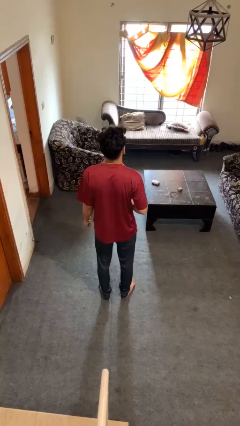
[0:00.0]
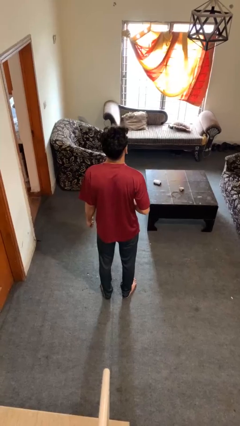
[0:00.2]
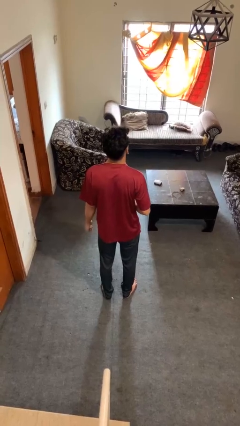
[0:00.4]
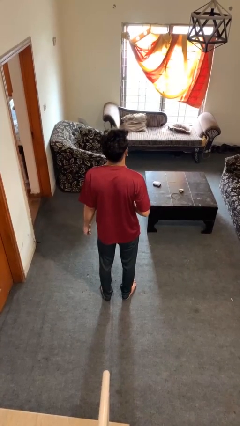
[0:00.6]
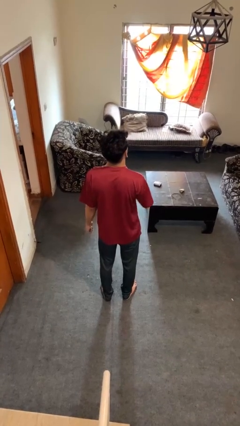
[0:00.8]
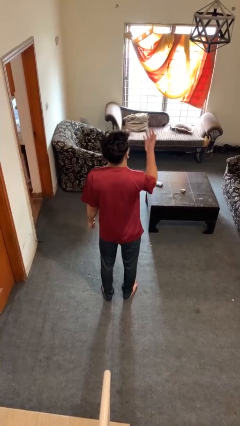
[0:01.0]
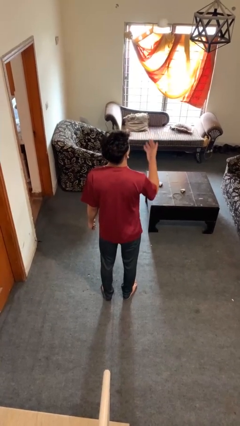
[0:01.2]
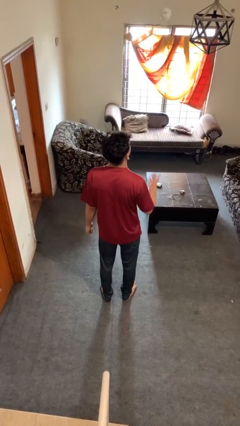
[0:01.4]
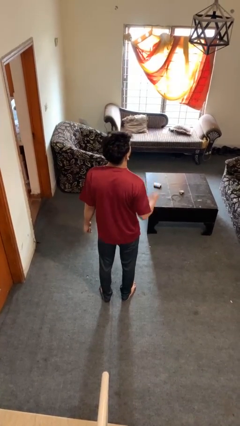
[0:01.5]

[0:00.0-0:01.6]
person drops object

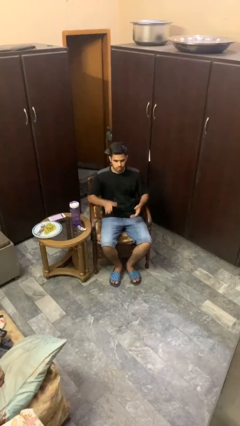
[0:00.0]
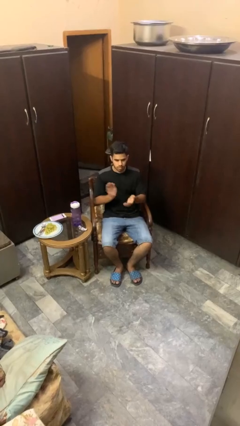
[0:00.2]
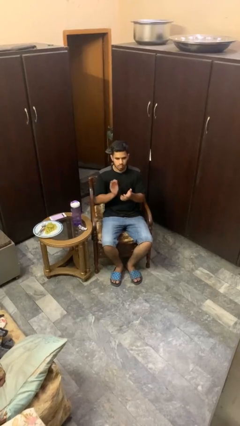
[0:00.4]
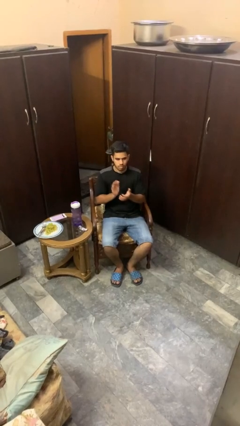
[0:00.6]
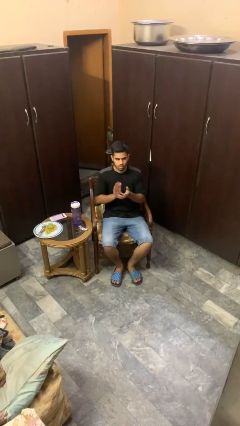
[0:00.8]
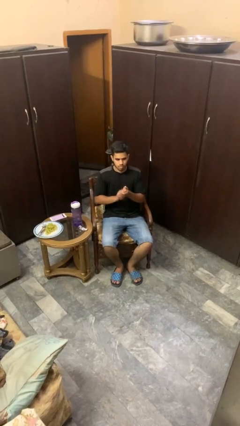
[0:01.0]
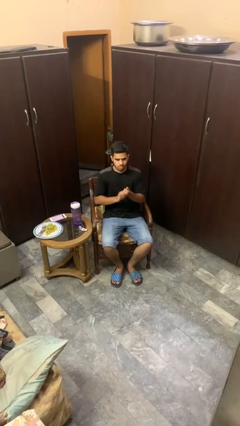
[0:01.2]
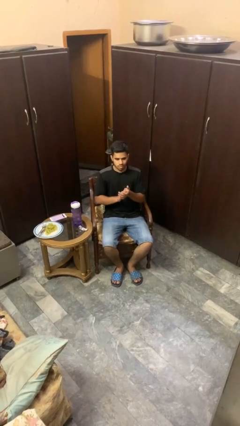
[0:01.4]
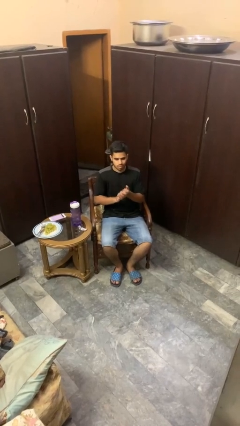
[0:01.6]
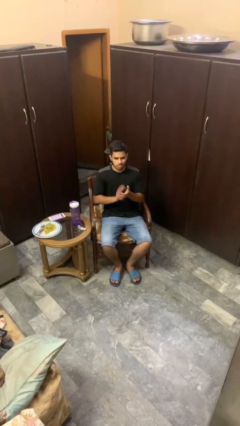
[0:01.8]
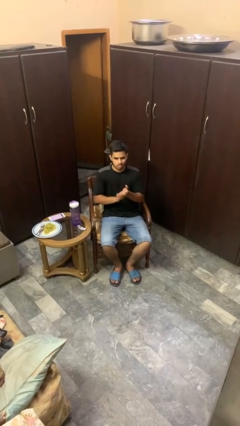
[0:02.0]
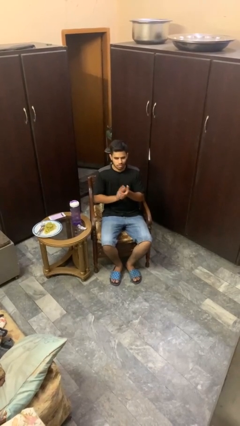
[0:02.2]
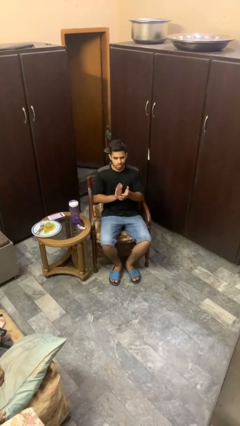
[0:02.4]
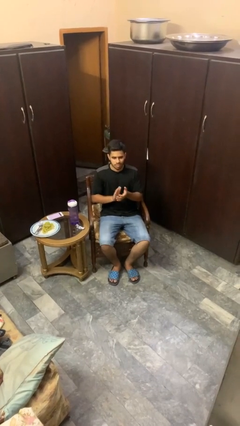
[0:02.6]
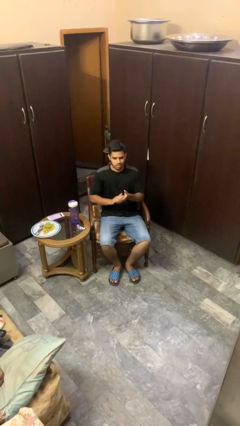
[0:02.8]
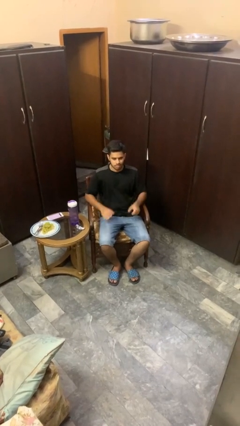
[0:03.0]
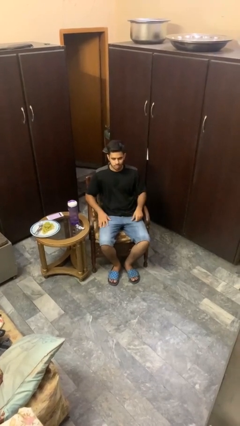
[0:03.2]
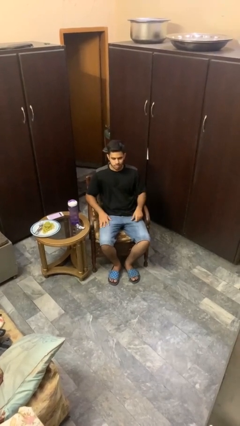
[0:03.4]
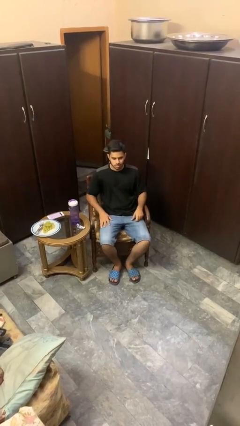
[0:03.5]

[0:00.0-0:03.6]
person claps hands

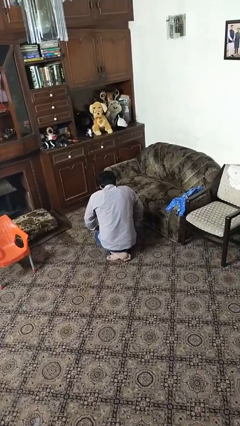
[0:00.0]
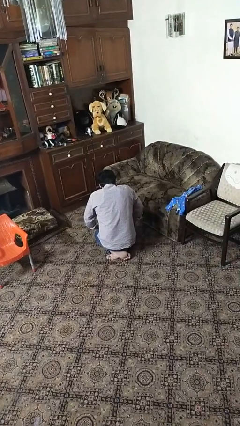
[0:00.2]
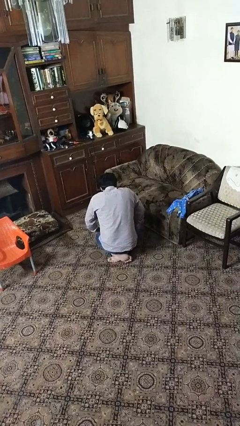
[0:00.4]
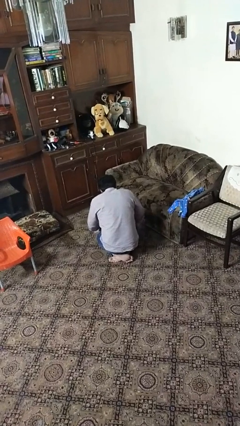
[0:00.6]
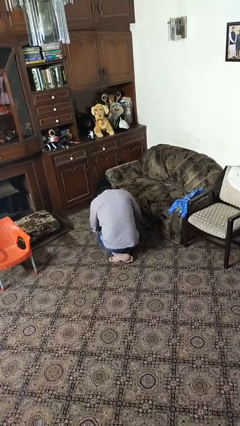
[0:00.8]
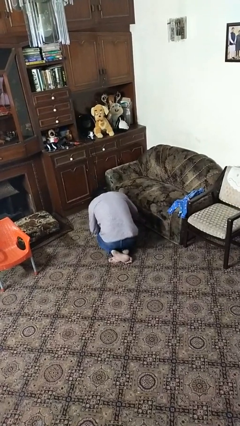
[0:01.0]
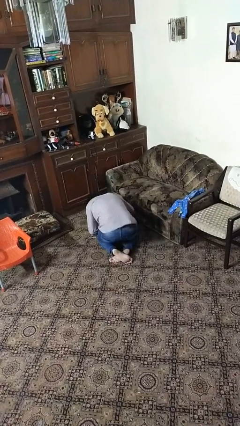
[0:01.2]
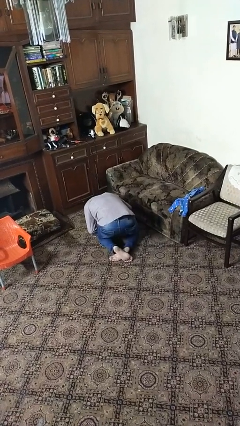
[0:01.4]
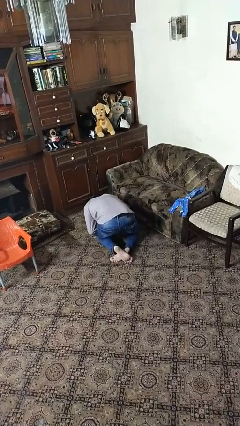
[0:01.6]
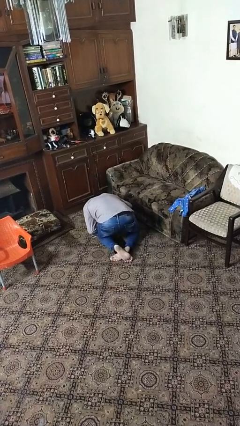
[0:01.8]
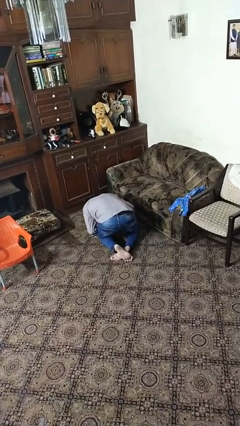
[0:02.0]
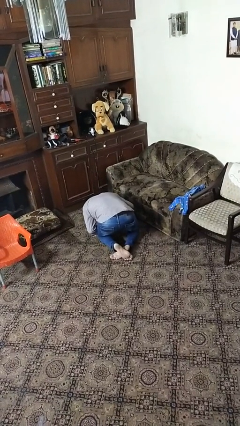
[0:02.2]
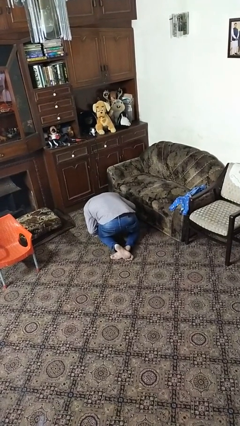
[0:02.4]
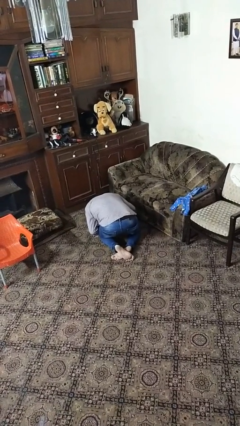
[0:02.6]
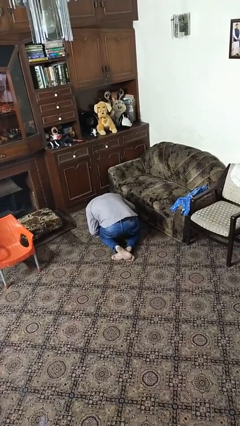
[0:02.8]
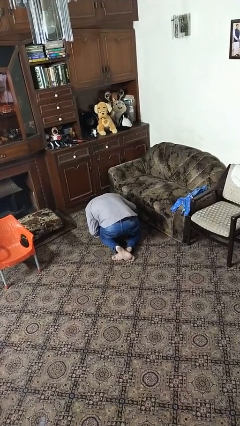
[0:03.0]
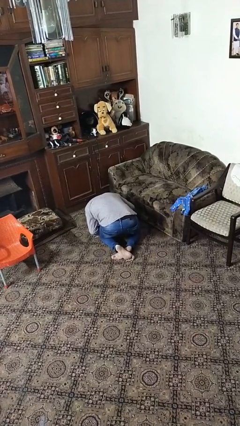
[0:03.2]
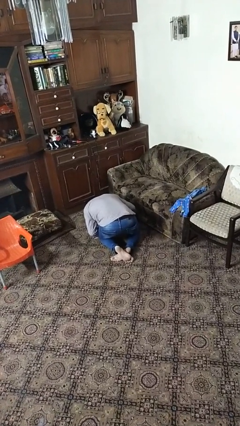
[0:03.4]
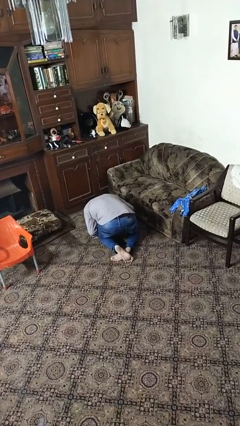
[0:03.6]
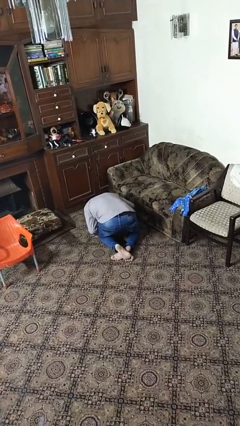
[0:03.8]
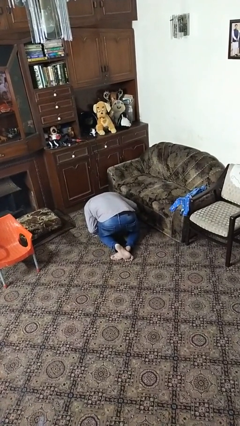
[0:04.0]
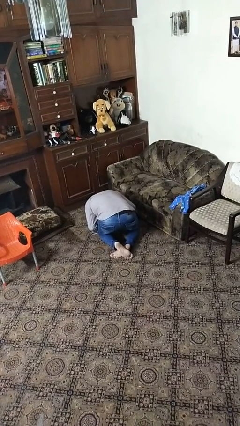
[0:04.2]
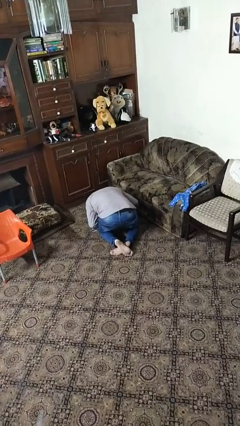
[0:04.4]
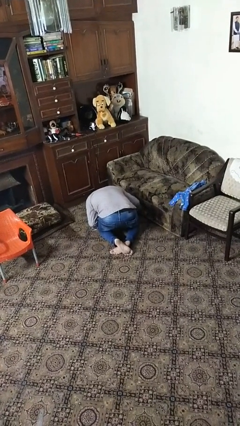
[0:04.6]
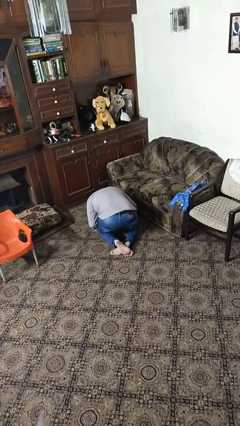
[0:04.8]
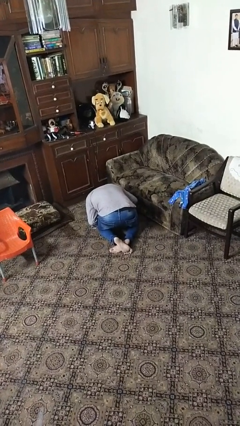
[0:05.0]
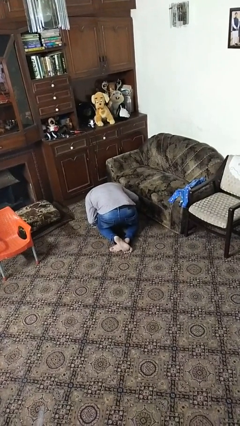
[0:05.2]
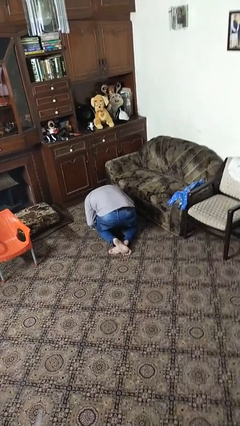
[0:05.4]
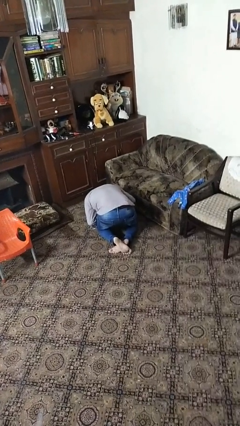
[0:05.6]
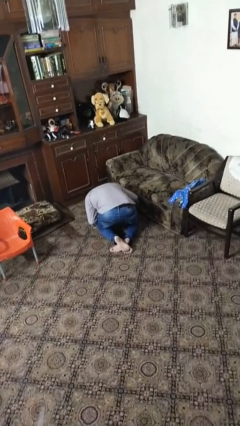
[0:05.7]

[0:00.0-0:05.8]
person searches under couch

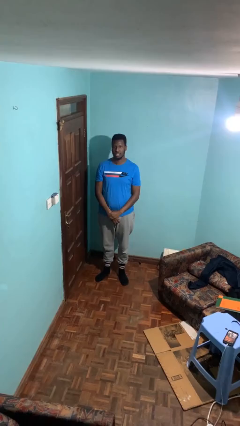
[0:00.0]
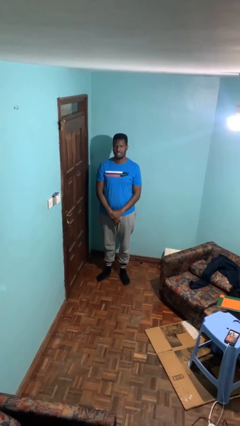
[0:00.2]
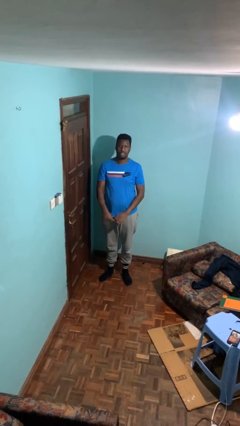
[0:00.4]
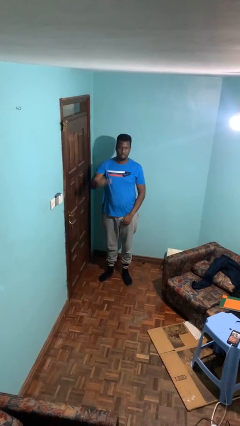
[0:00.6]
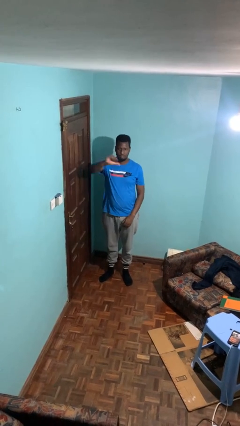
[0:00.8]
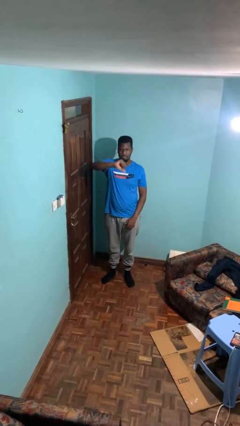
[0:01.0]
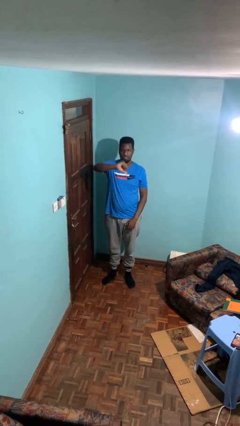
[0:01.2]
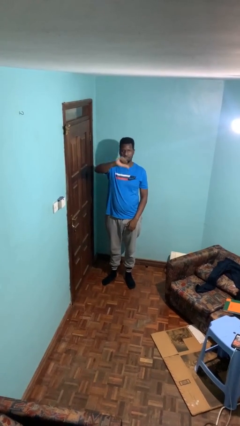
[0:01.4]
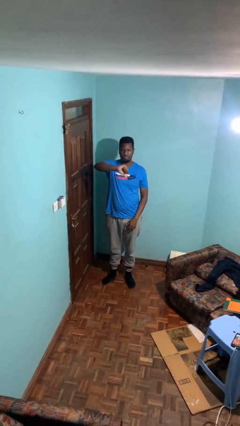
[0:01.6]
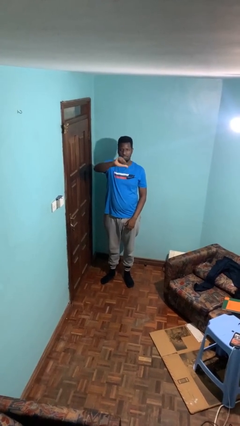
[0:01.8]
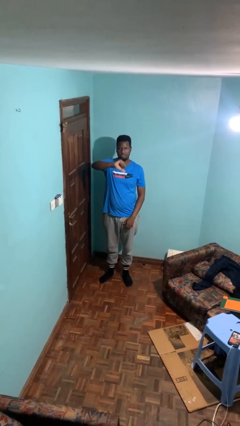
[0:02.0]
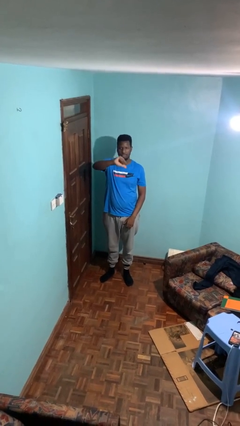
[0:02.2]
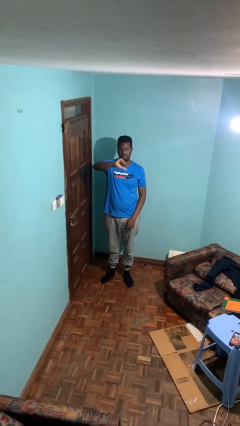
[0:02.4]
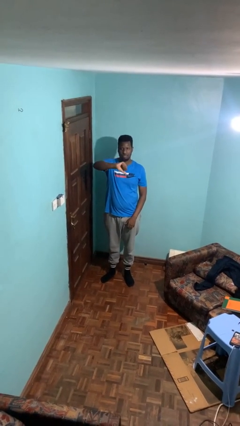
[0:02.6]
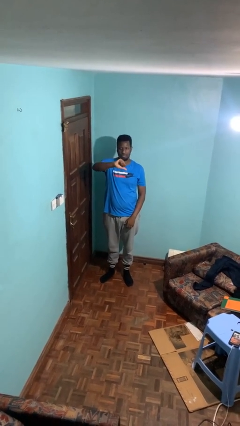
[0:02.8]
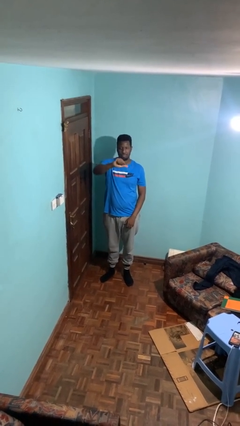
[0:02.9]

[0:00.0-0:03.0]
person gestures thumbs down

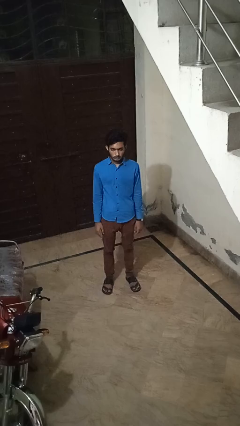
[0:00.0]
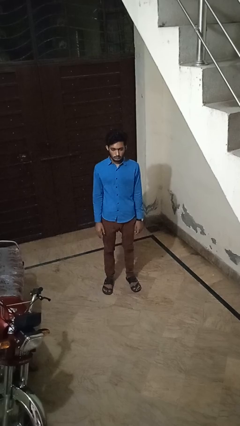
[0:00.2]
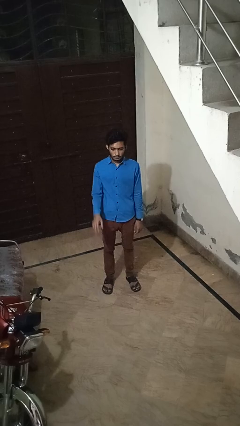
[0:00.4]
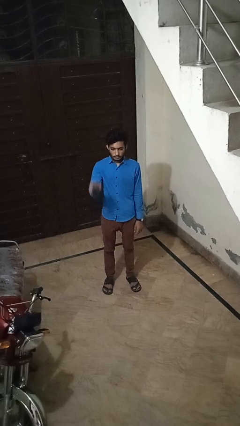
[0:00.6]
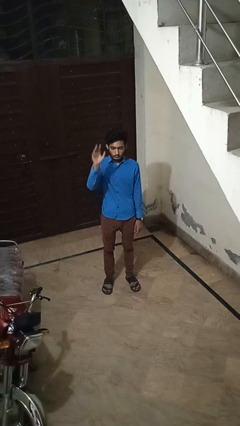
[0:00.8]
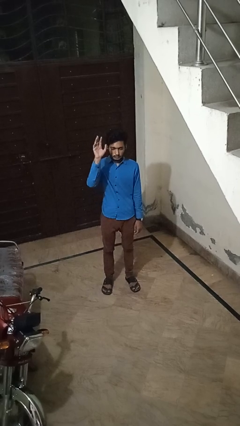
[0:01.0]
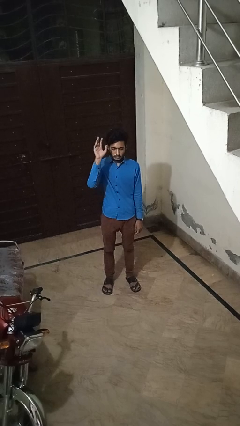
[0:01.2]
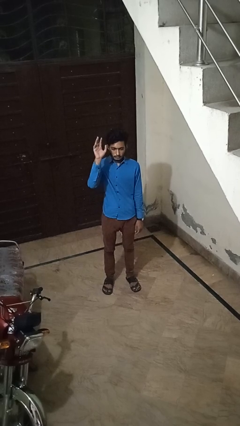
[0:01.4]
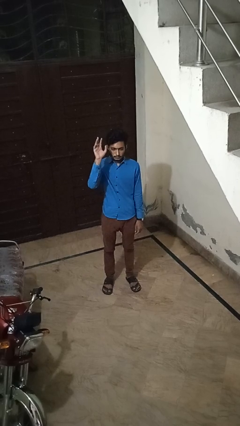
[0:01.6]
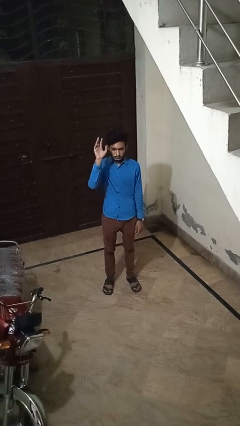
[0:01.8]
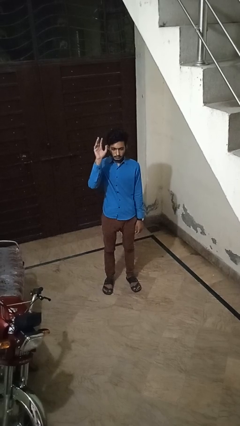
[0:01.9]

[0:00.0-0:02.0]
person gestures raise hand

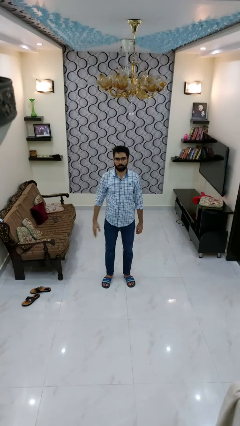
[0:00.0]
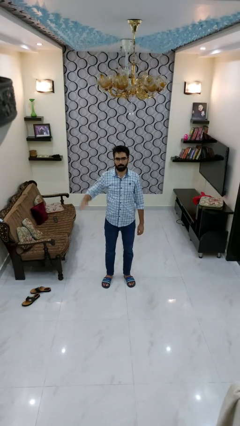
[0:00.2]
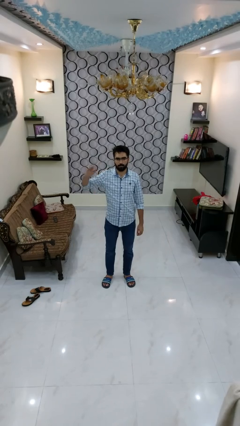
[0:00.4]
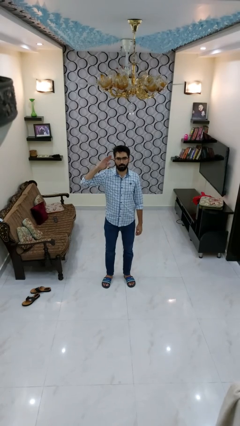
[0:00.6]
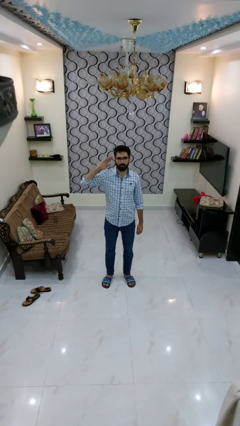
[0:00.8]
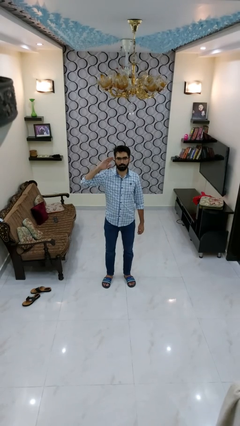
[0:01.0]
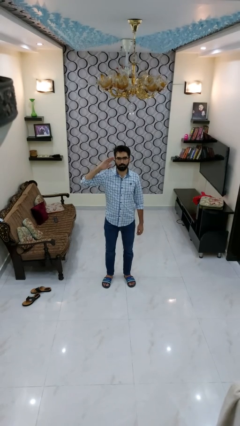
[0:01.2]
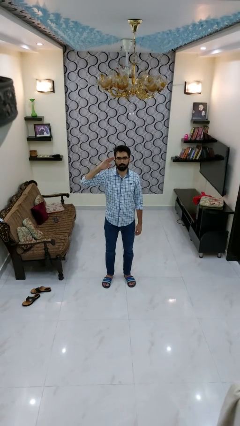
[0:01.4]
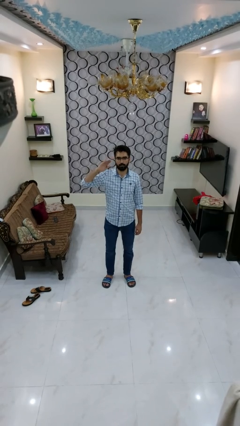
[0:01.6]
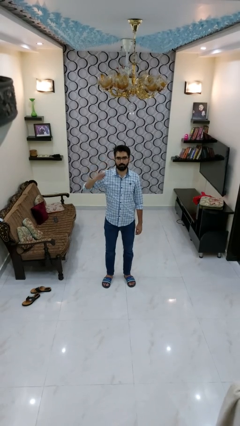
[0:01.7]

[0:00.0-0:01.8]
person salutes
